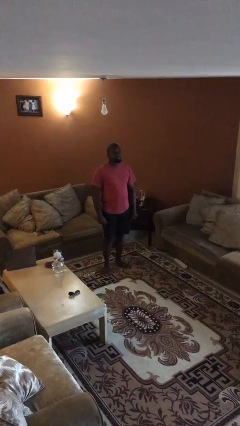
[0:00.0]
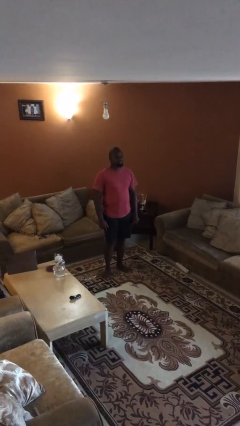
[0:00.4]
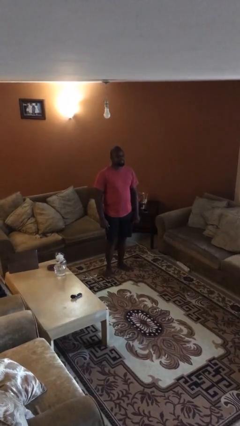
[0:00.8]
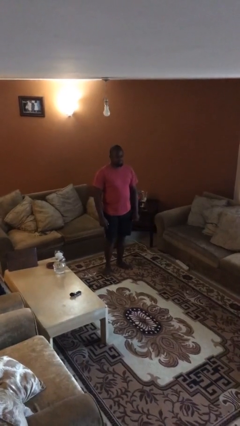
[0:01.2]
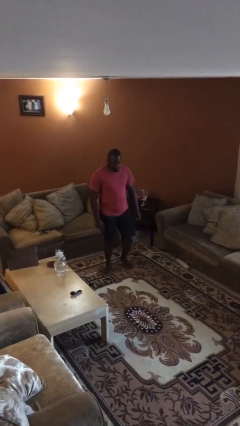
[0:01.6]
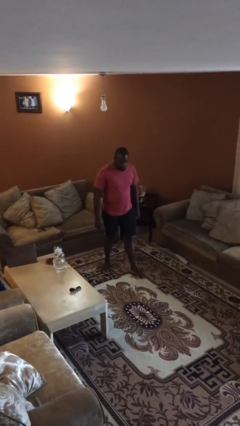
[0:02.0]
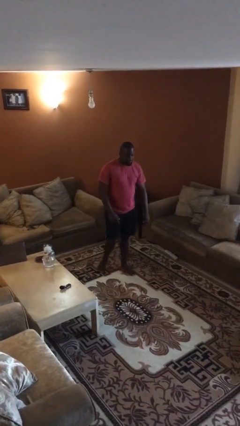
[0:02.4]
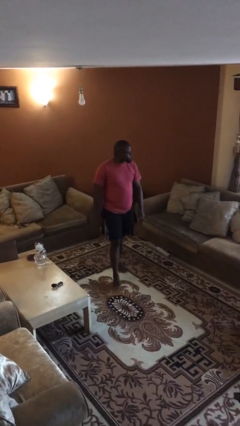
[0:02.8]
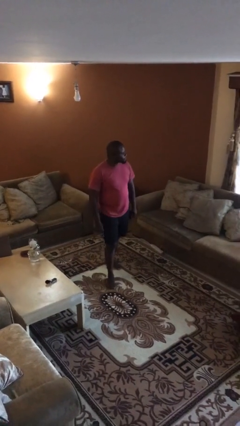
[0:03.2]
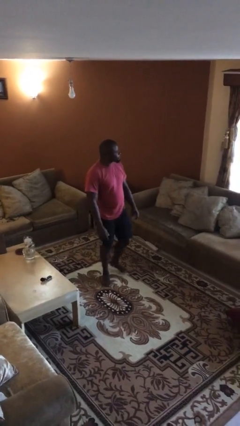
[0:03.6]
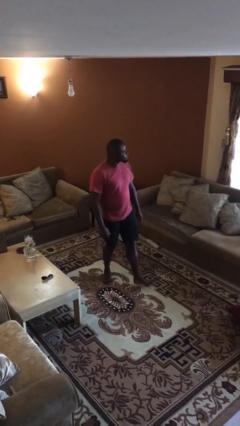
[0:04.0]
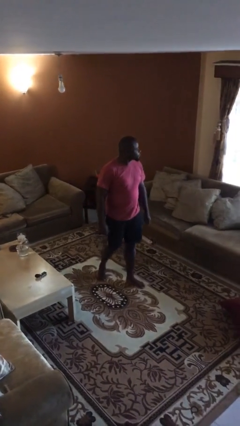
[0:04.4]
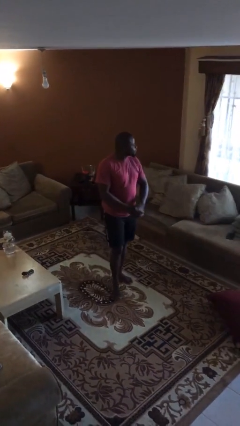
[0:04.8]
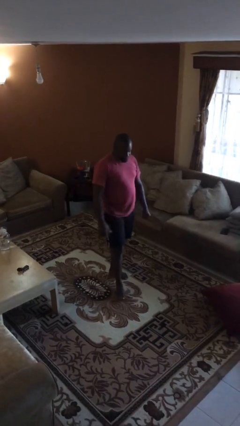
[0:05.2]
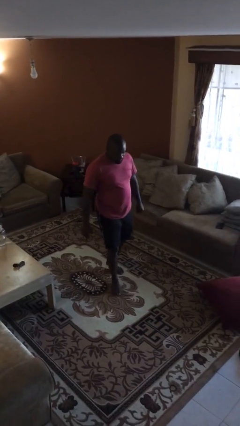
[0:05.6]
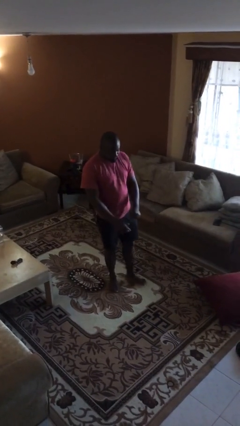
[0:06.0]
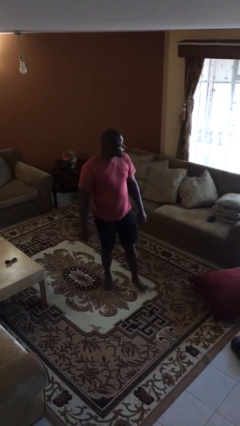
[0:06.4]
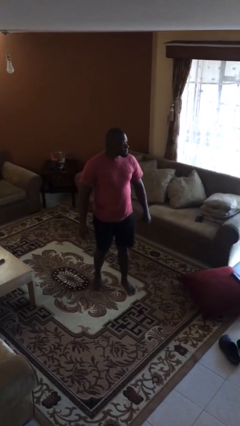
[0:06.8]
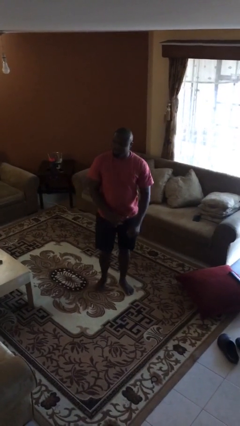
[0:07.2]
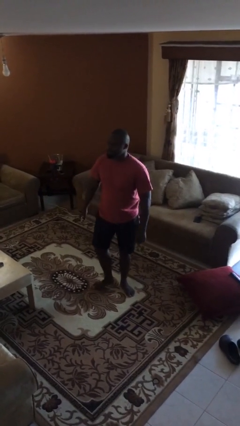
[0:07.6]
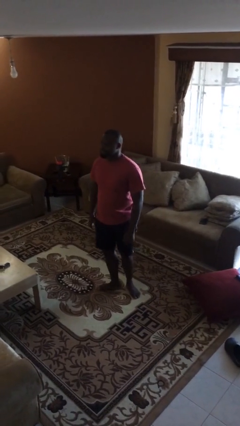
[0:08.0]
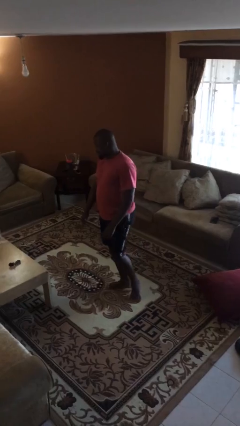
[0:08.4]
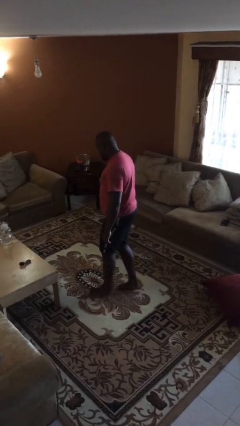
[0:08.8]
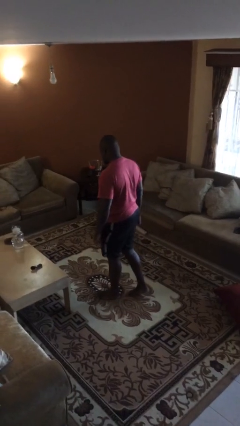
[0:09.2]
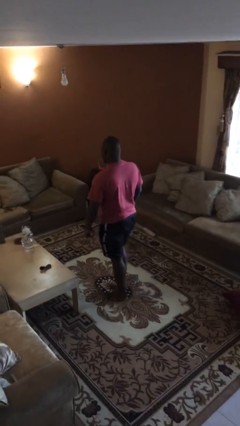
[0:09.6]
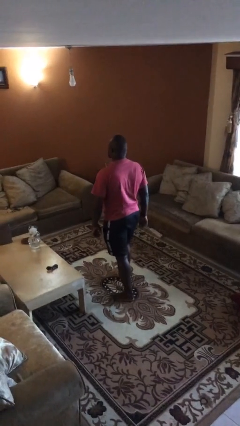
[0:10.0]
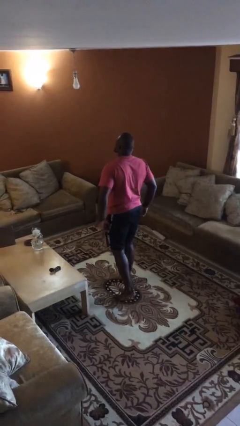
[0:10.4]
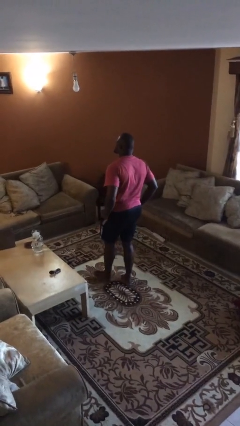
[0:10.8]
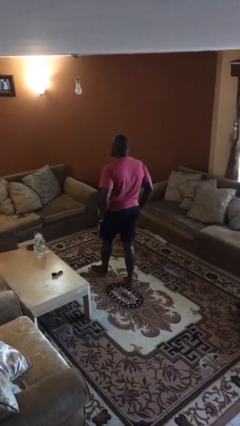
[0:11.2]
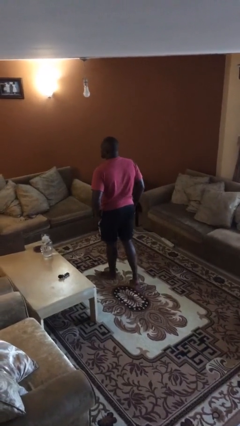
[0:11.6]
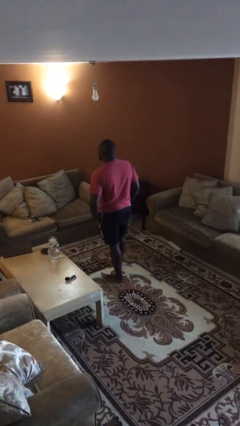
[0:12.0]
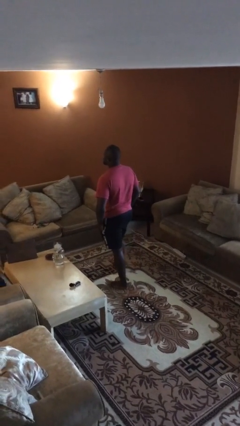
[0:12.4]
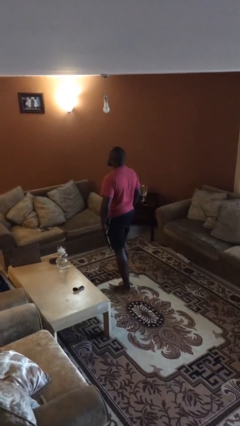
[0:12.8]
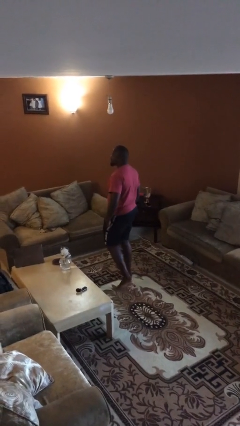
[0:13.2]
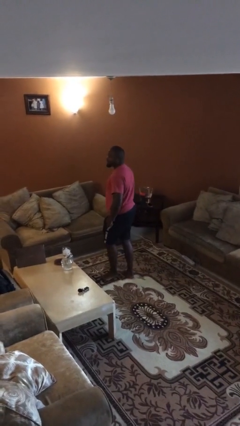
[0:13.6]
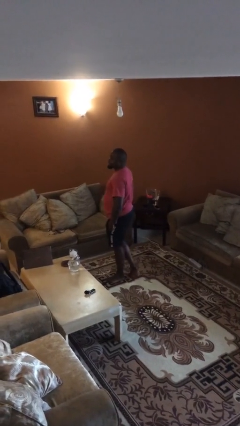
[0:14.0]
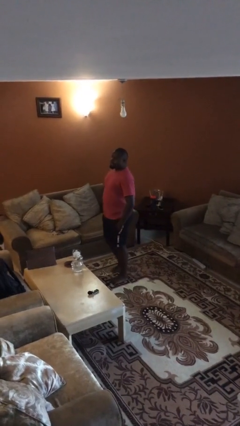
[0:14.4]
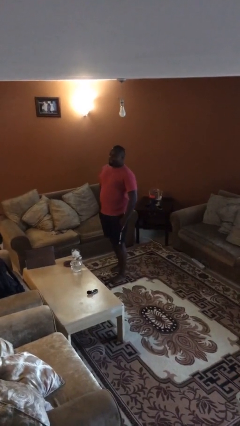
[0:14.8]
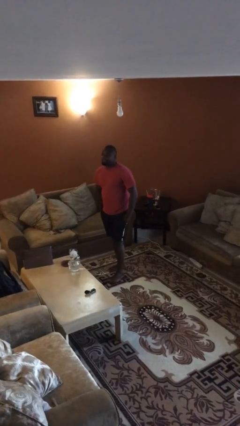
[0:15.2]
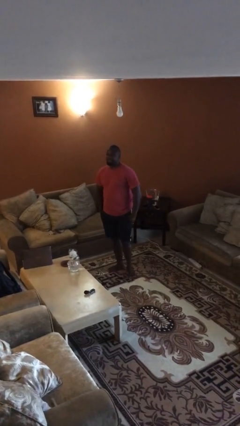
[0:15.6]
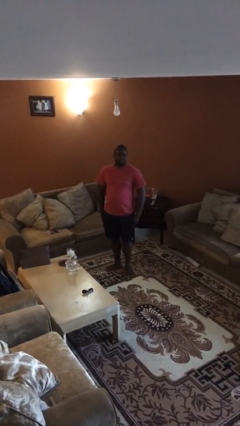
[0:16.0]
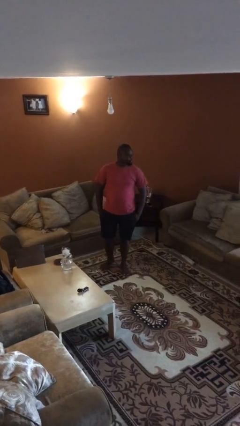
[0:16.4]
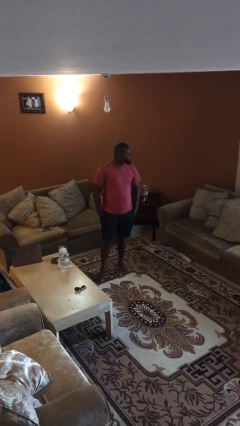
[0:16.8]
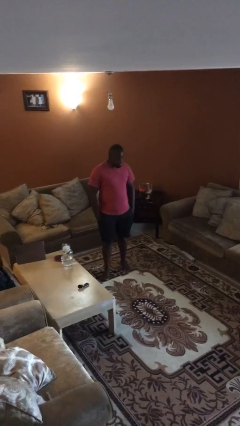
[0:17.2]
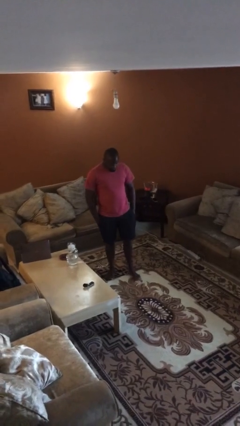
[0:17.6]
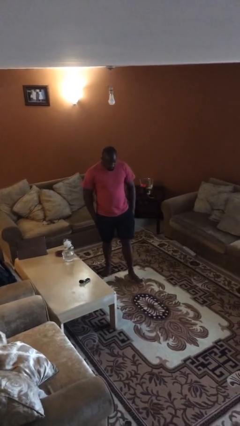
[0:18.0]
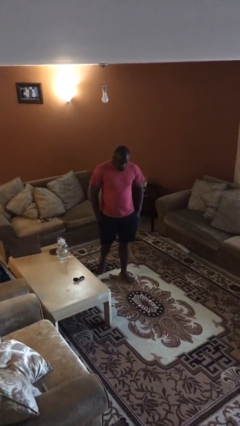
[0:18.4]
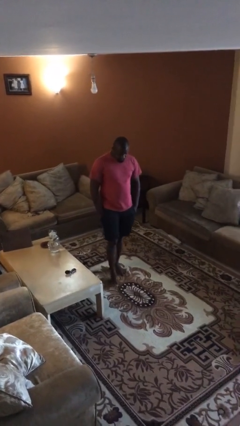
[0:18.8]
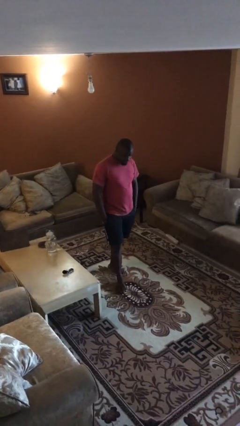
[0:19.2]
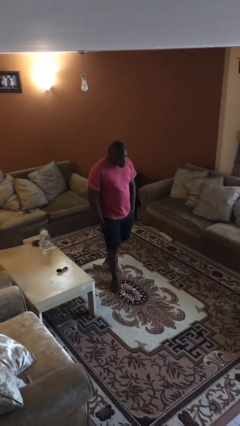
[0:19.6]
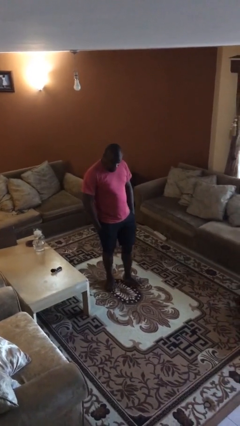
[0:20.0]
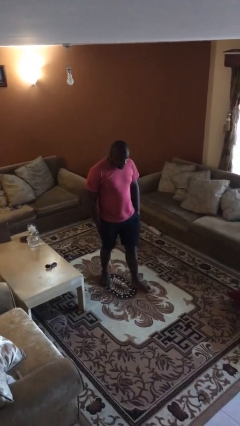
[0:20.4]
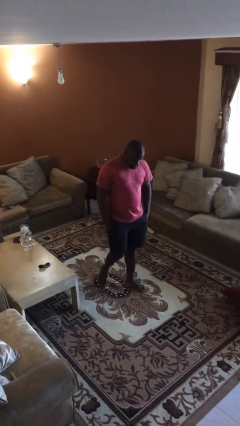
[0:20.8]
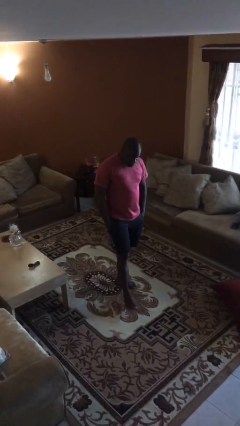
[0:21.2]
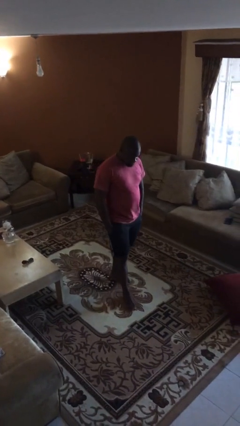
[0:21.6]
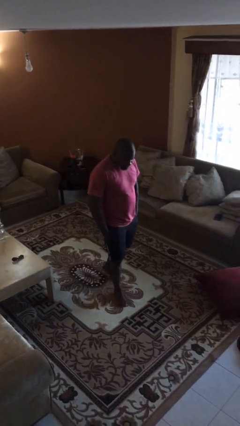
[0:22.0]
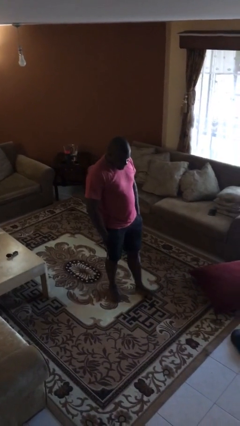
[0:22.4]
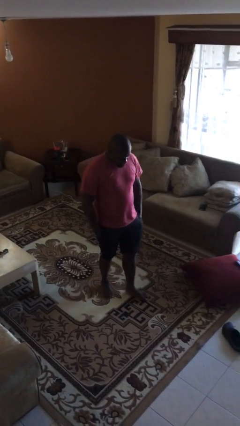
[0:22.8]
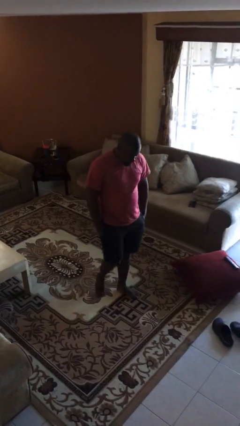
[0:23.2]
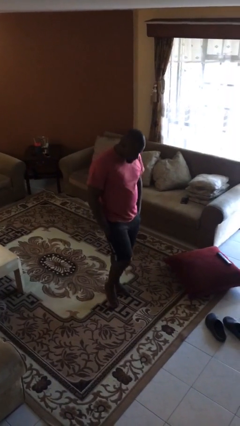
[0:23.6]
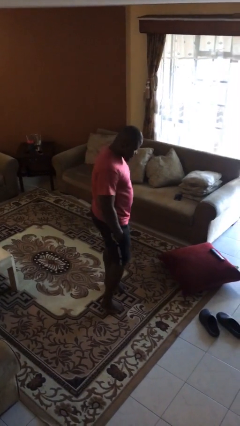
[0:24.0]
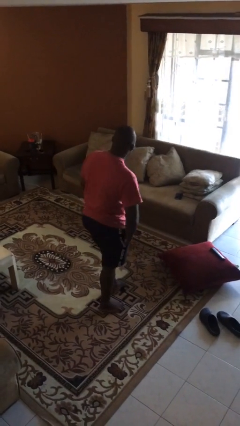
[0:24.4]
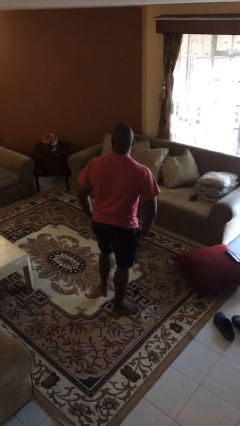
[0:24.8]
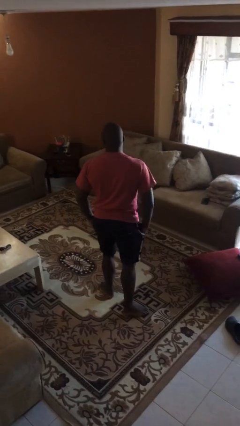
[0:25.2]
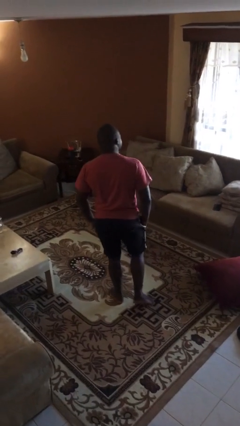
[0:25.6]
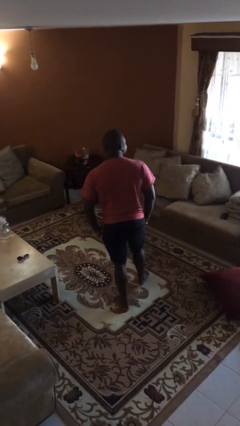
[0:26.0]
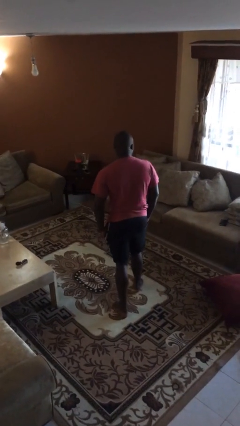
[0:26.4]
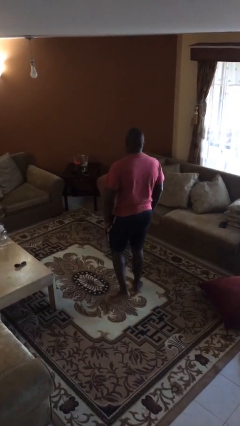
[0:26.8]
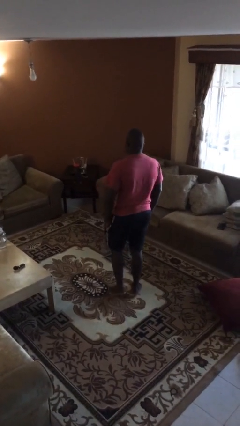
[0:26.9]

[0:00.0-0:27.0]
person walks

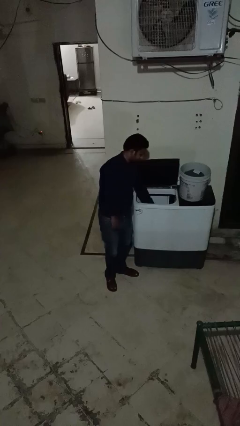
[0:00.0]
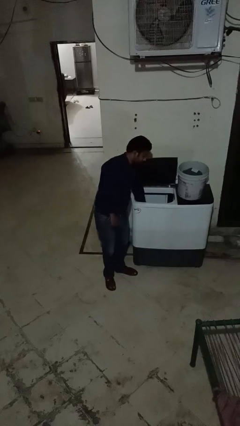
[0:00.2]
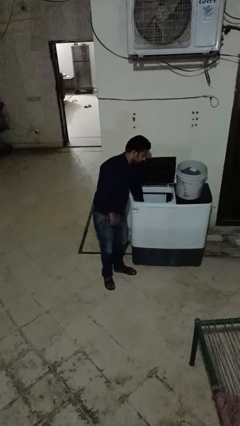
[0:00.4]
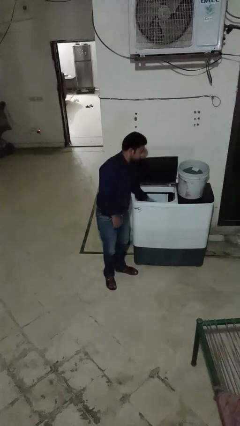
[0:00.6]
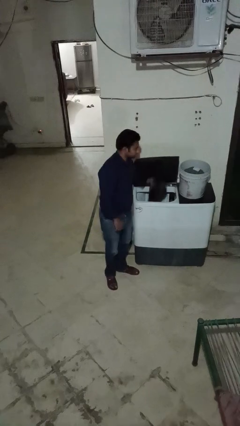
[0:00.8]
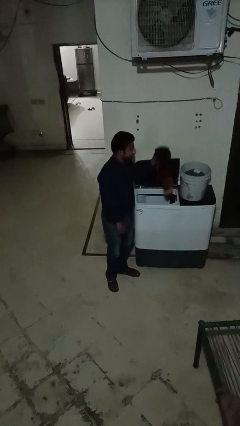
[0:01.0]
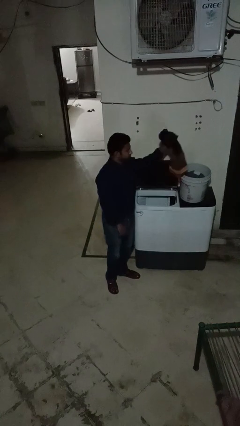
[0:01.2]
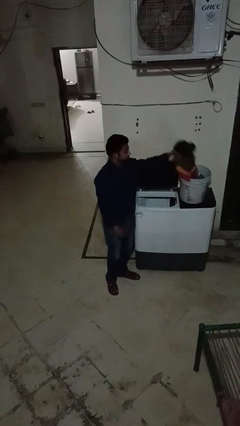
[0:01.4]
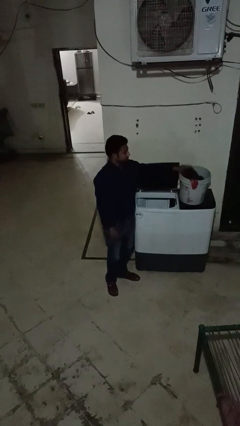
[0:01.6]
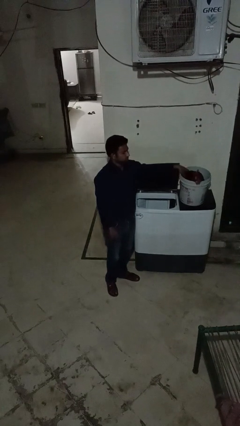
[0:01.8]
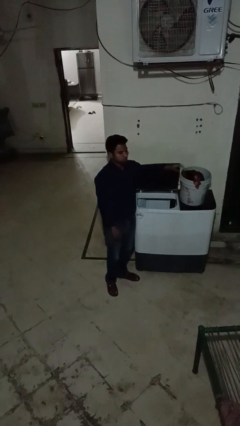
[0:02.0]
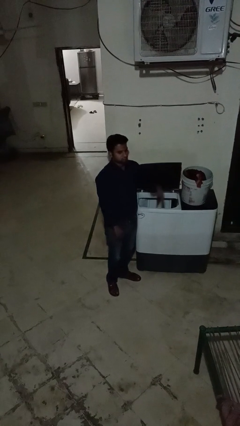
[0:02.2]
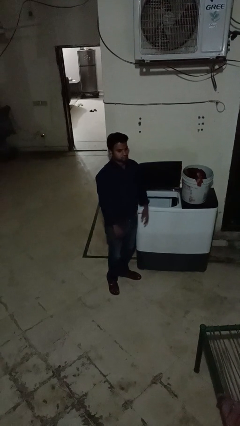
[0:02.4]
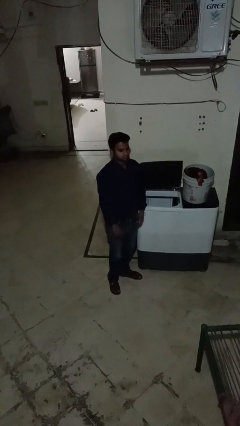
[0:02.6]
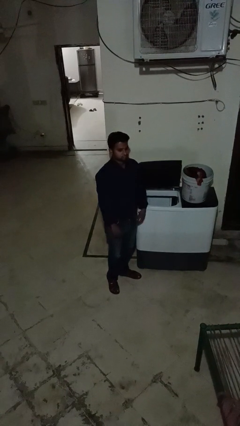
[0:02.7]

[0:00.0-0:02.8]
person unloads clotheswasher

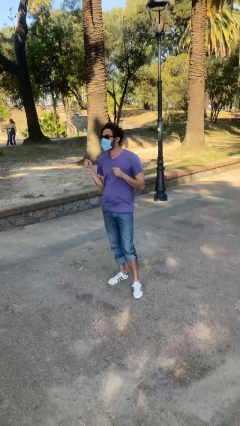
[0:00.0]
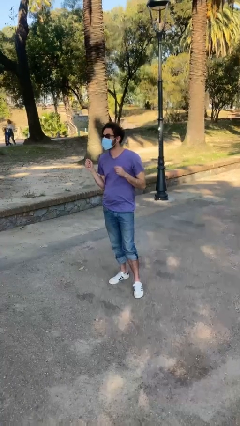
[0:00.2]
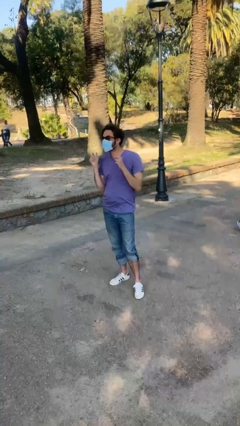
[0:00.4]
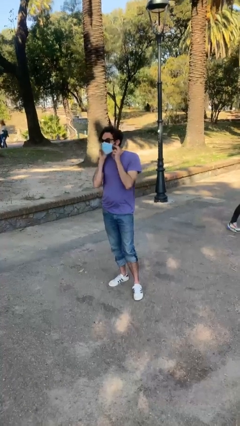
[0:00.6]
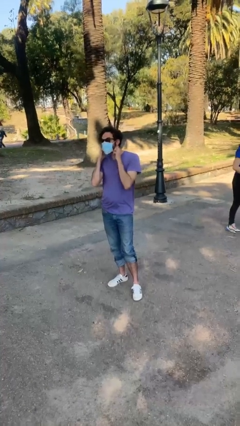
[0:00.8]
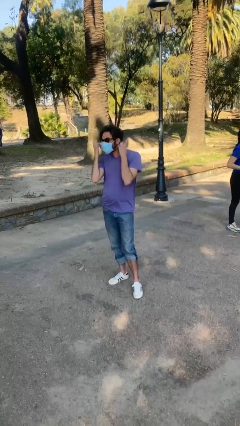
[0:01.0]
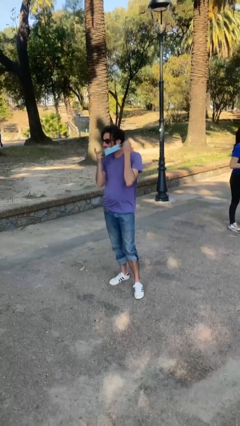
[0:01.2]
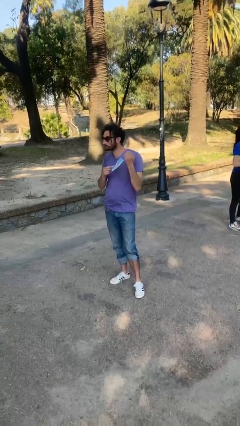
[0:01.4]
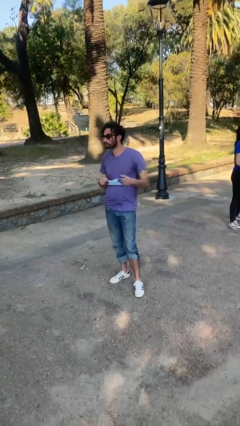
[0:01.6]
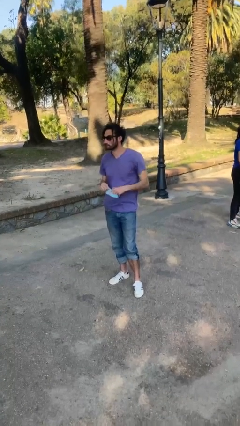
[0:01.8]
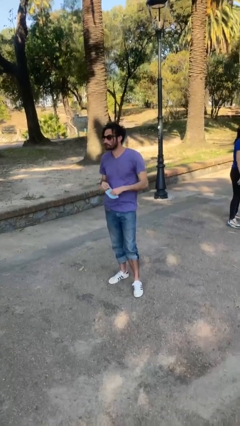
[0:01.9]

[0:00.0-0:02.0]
person takes off facemask
